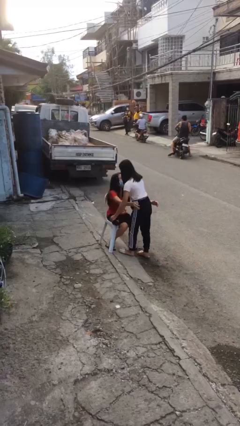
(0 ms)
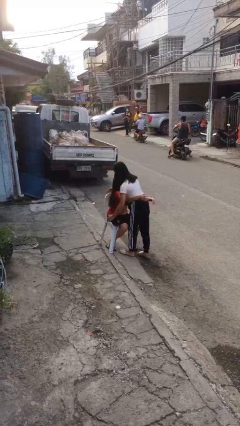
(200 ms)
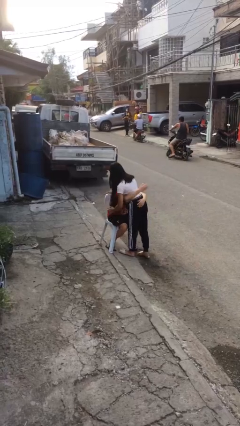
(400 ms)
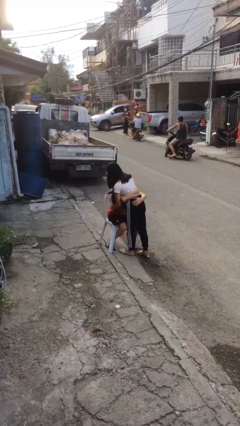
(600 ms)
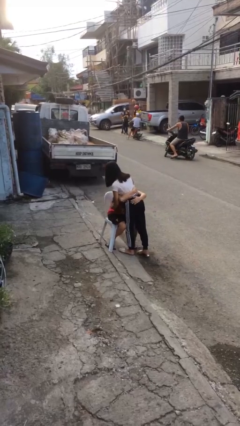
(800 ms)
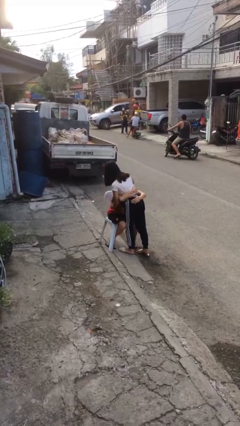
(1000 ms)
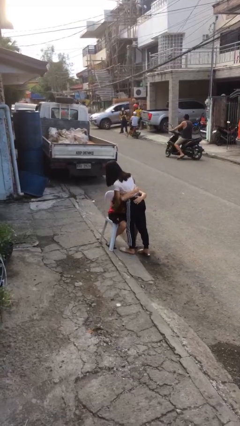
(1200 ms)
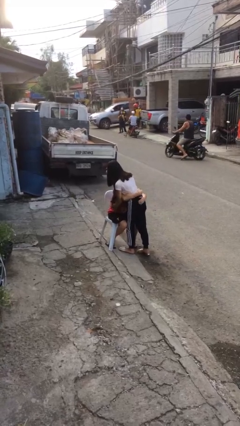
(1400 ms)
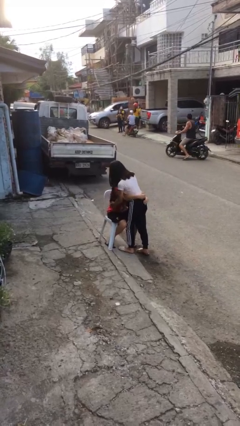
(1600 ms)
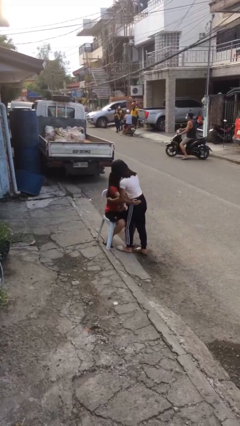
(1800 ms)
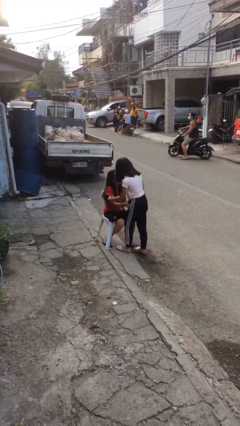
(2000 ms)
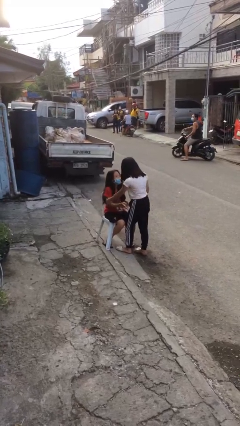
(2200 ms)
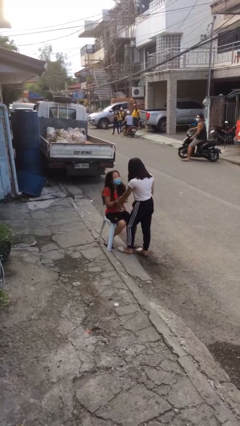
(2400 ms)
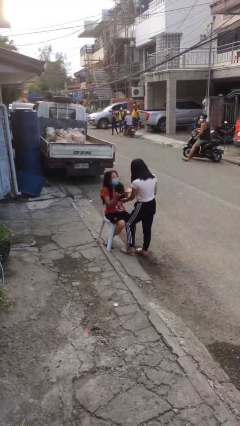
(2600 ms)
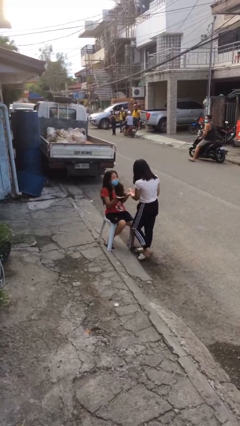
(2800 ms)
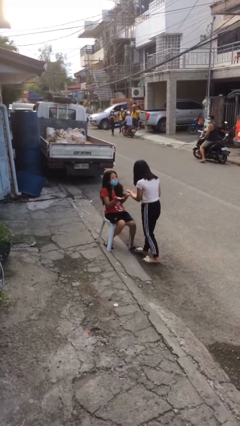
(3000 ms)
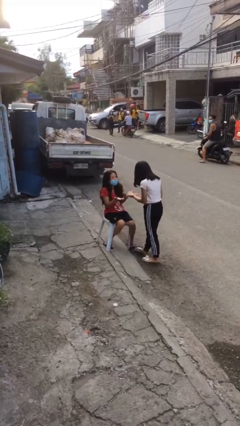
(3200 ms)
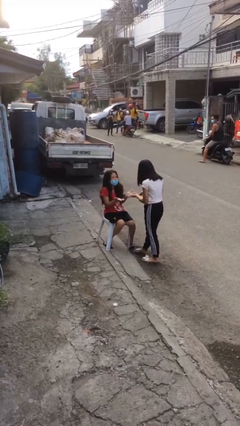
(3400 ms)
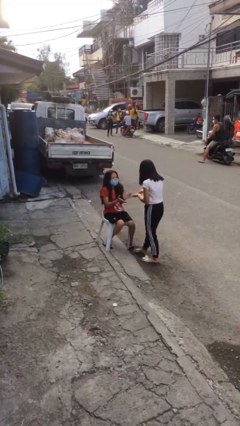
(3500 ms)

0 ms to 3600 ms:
person embraces person

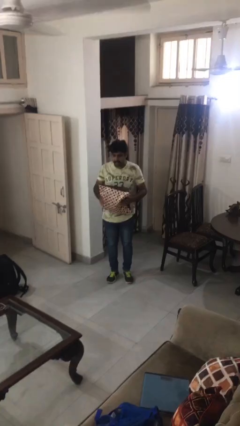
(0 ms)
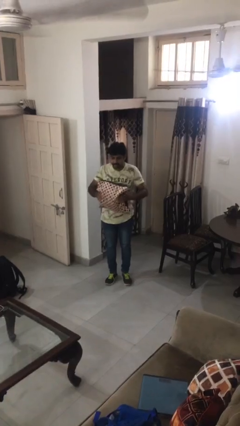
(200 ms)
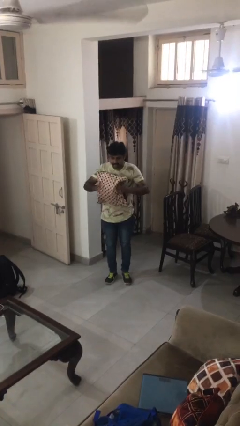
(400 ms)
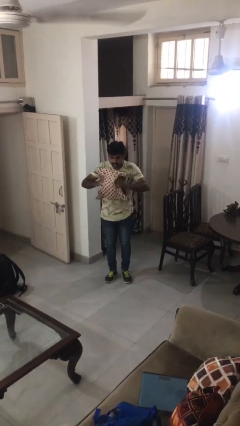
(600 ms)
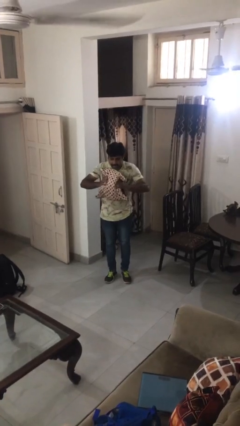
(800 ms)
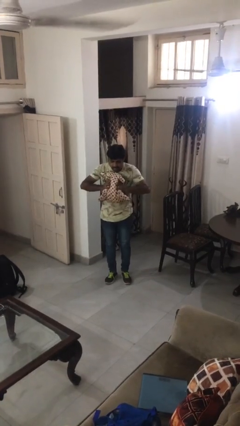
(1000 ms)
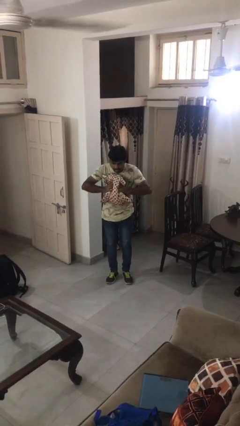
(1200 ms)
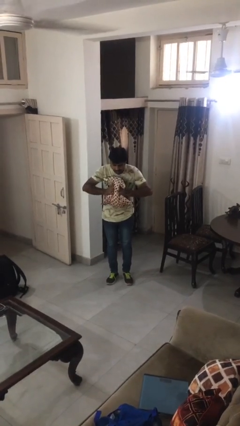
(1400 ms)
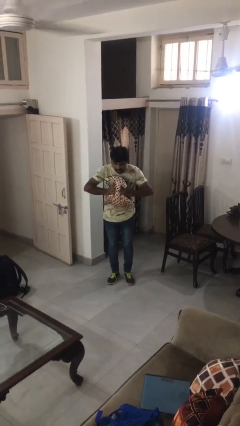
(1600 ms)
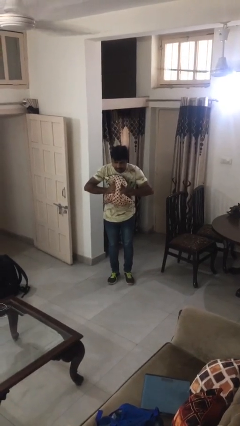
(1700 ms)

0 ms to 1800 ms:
person squeezes object

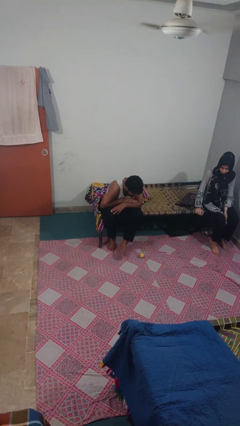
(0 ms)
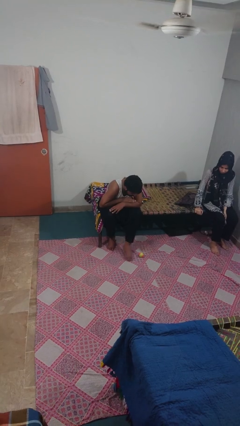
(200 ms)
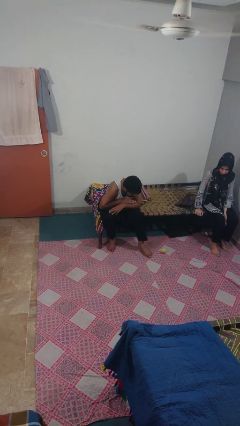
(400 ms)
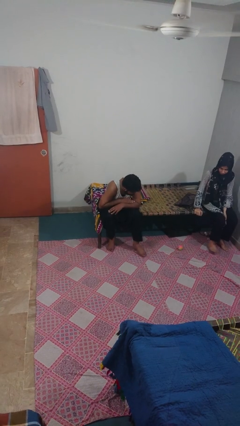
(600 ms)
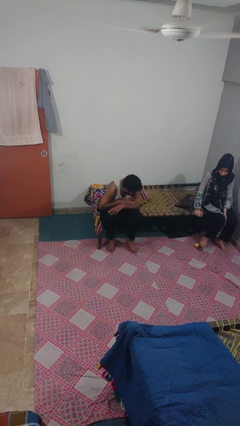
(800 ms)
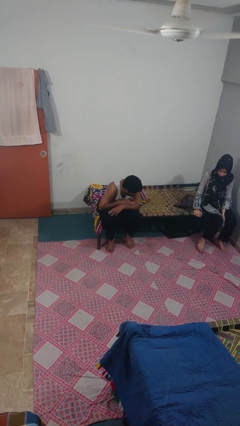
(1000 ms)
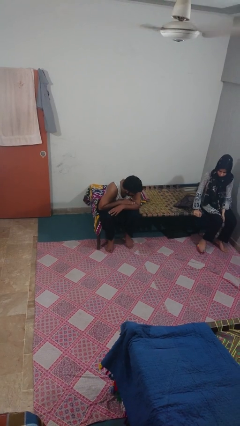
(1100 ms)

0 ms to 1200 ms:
person kicks object to person

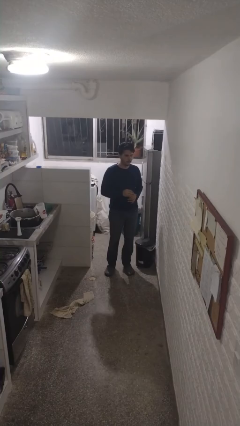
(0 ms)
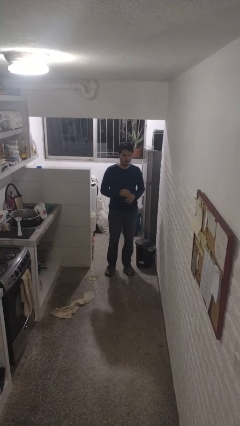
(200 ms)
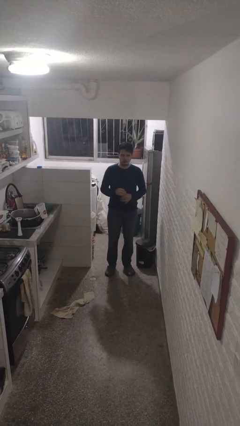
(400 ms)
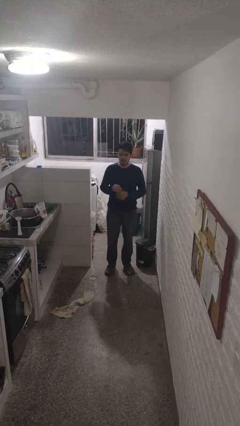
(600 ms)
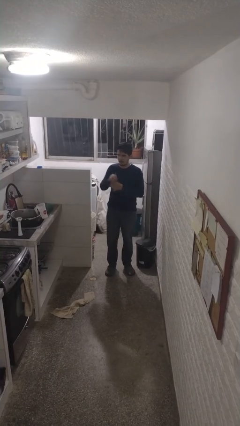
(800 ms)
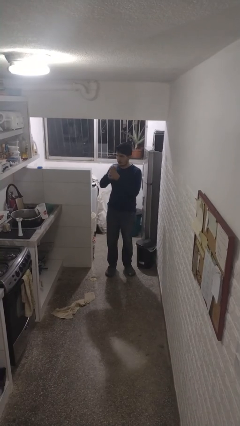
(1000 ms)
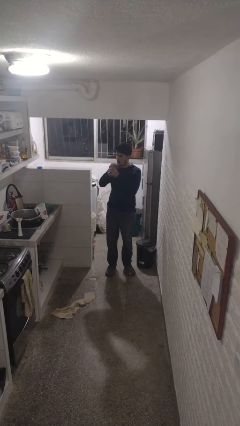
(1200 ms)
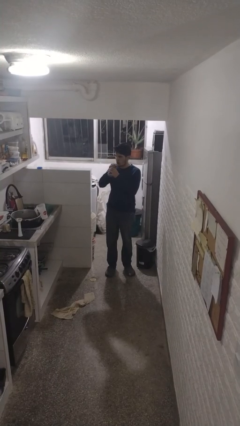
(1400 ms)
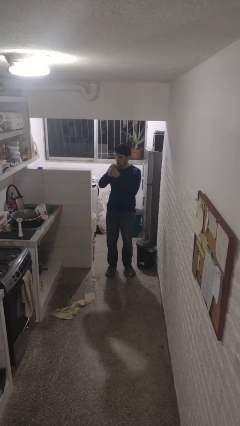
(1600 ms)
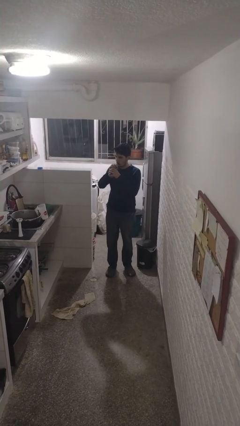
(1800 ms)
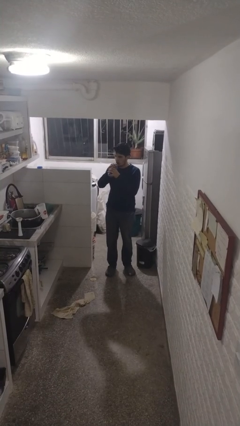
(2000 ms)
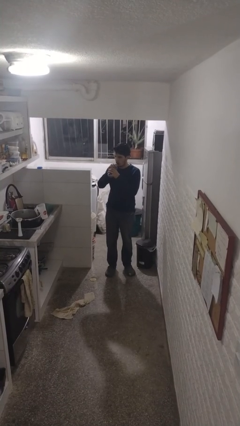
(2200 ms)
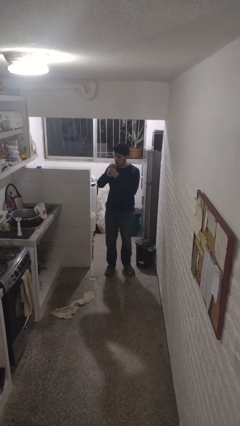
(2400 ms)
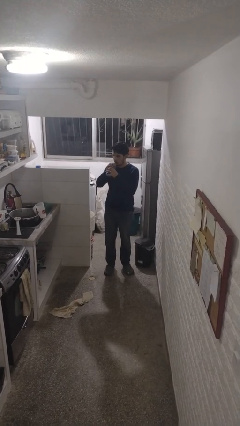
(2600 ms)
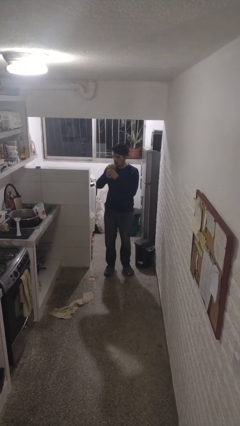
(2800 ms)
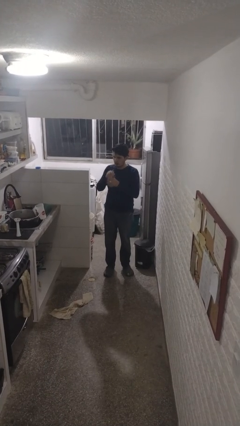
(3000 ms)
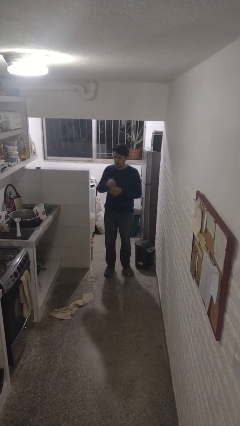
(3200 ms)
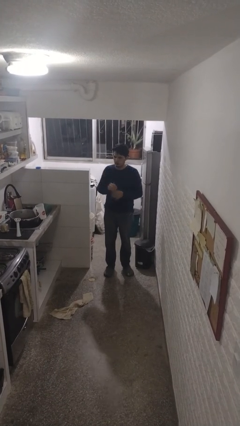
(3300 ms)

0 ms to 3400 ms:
person drinks from straw

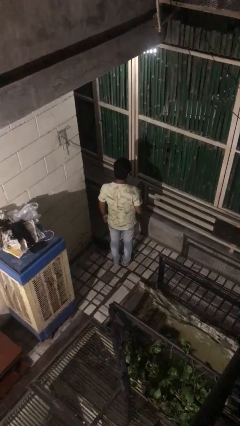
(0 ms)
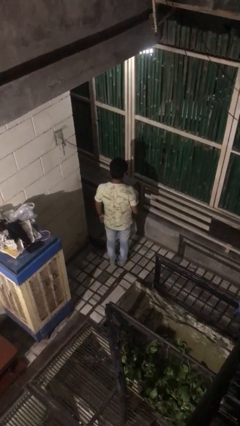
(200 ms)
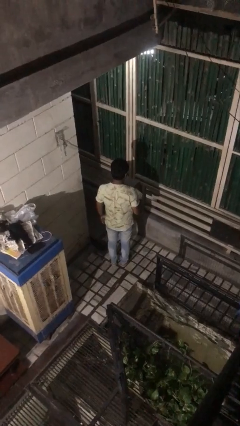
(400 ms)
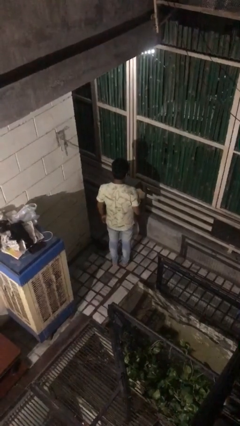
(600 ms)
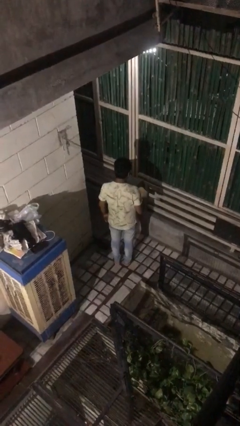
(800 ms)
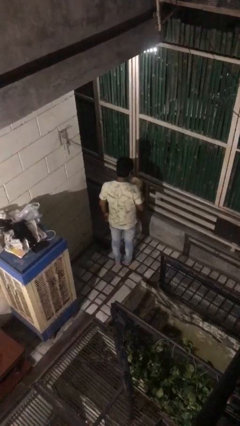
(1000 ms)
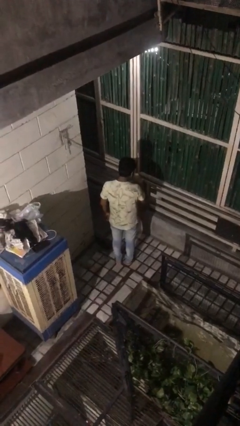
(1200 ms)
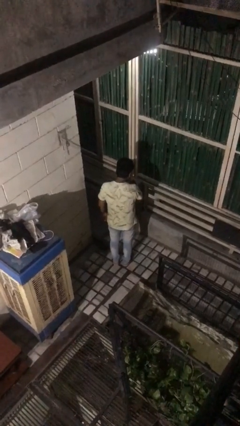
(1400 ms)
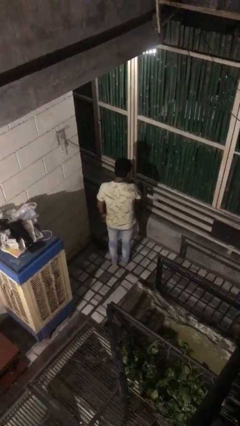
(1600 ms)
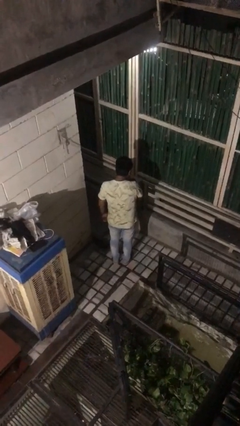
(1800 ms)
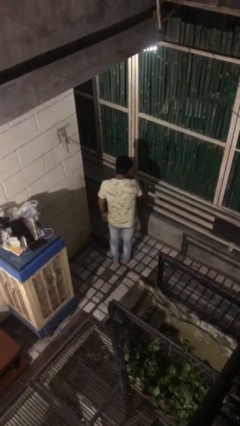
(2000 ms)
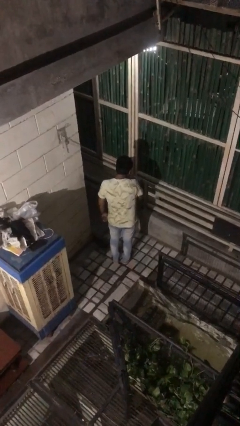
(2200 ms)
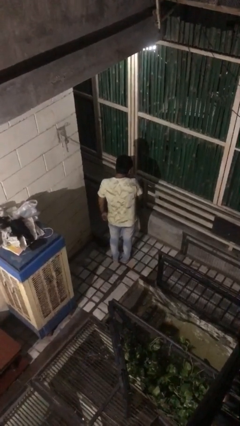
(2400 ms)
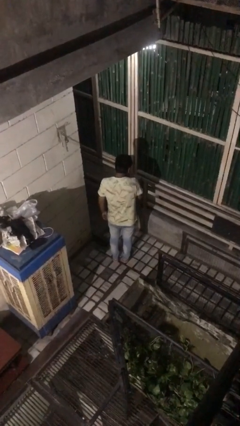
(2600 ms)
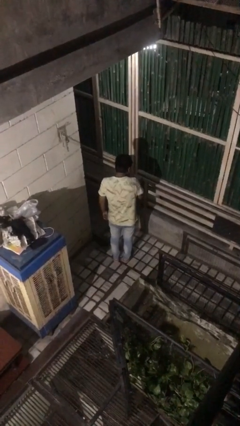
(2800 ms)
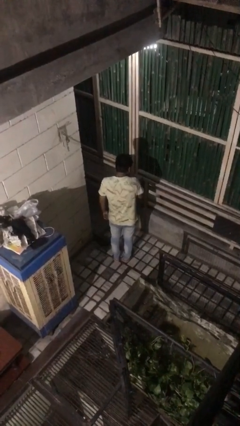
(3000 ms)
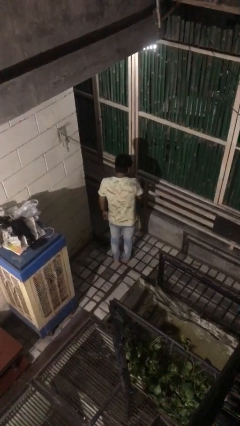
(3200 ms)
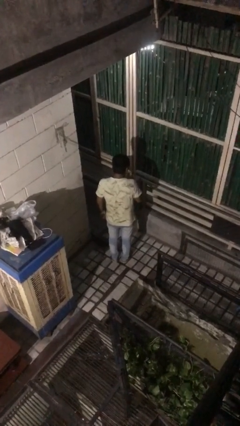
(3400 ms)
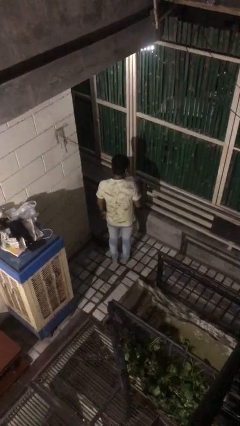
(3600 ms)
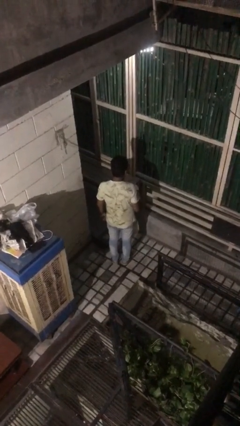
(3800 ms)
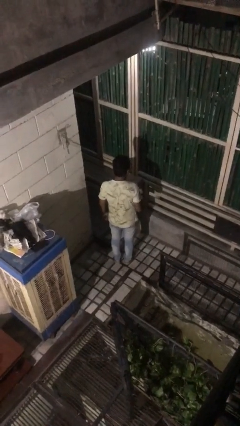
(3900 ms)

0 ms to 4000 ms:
person blows nose

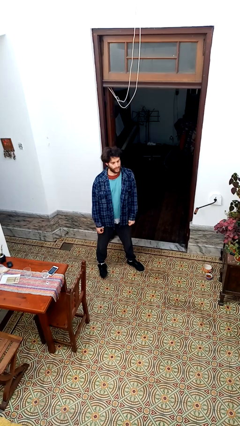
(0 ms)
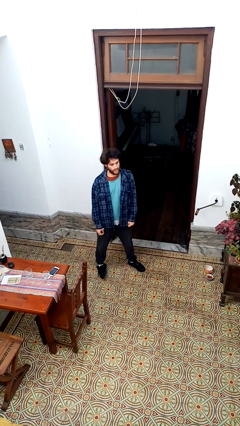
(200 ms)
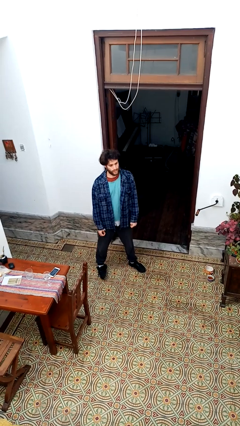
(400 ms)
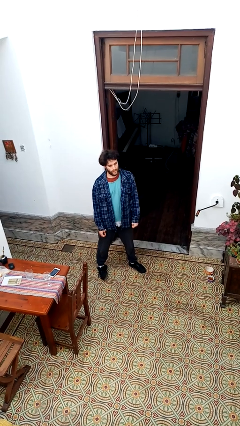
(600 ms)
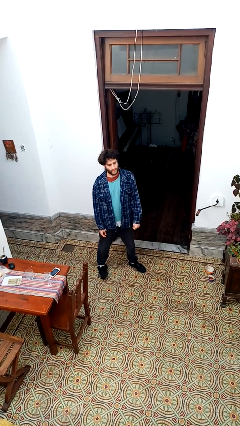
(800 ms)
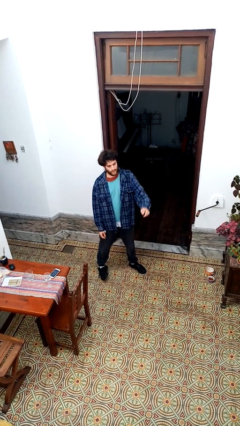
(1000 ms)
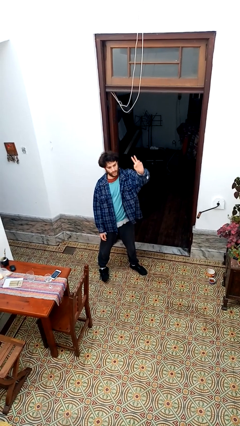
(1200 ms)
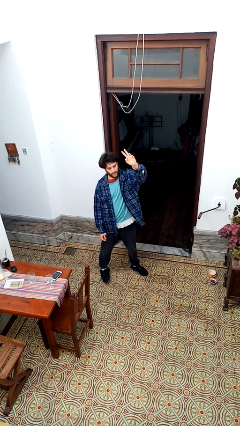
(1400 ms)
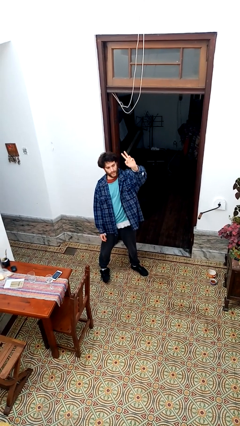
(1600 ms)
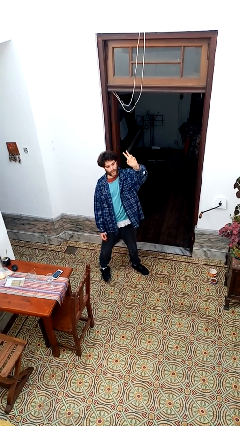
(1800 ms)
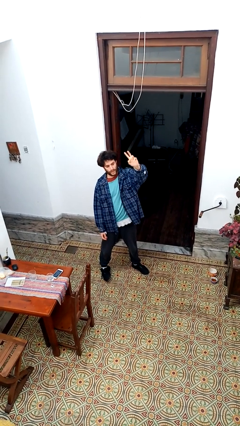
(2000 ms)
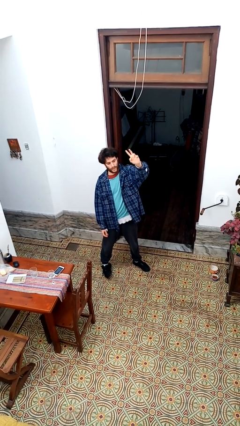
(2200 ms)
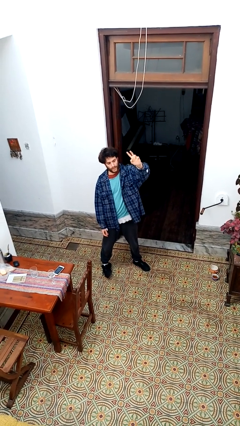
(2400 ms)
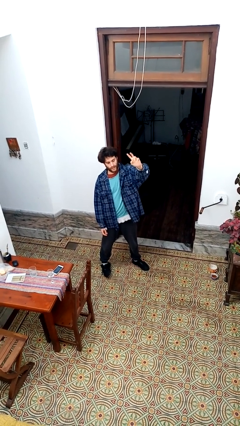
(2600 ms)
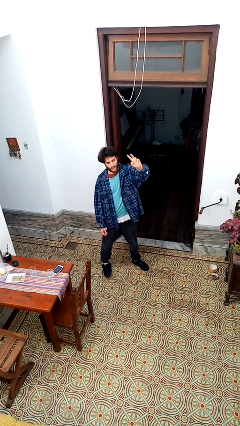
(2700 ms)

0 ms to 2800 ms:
person gestures raise hand

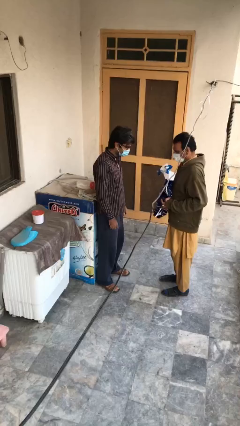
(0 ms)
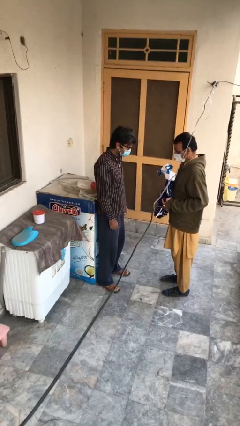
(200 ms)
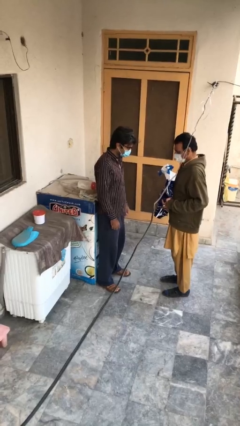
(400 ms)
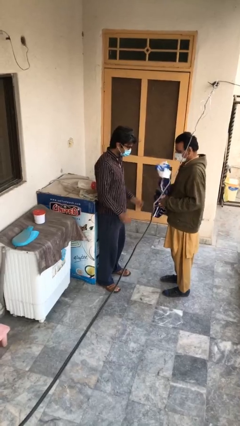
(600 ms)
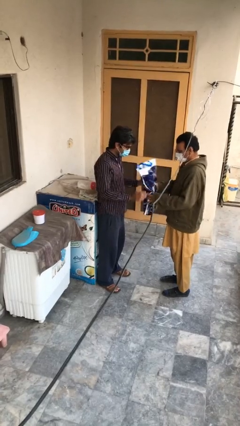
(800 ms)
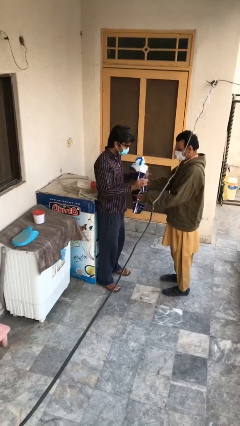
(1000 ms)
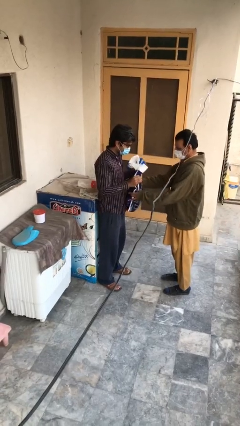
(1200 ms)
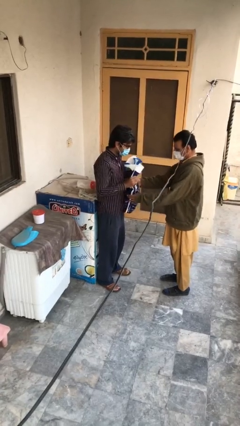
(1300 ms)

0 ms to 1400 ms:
person transfers object to person
